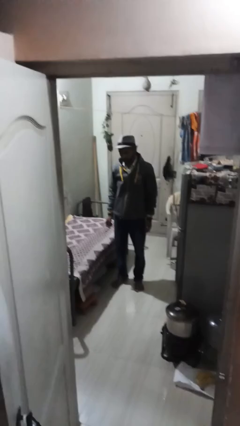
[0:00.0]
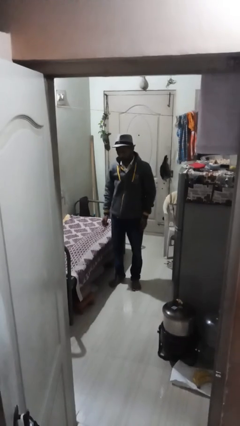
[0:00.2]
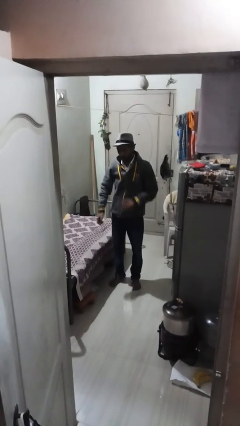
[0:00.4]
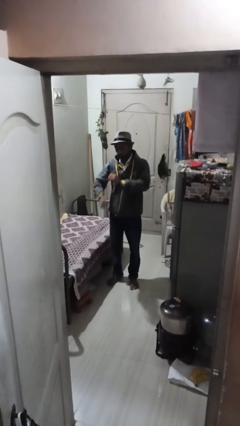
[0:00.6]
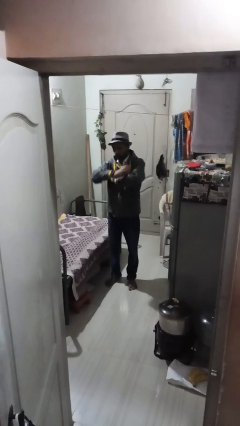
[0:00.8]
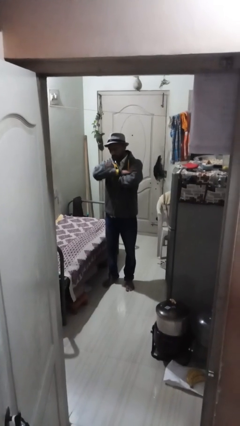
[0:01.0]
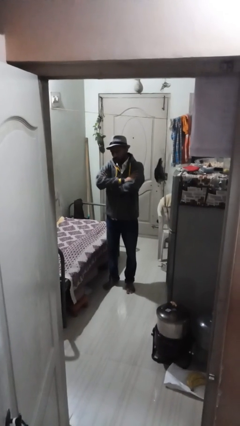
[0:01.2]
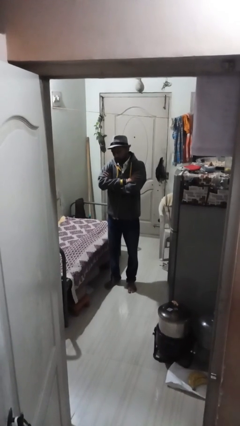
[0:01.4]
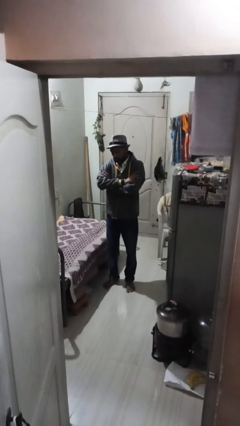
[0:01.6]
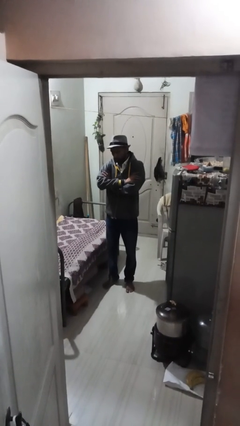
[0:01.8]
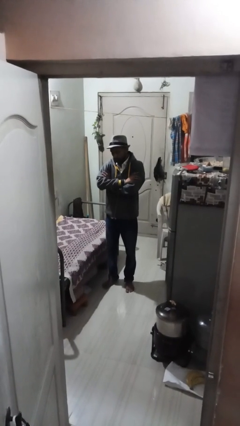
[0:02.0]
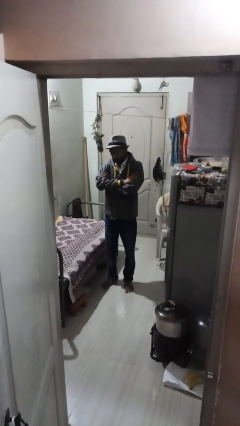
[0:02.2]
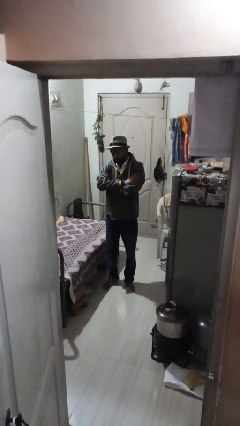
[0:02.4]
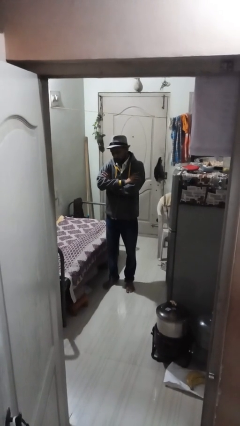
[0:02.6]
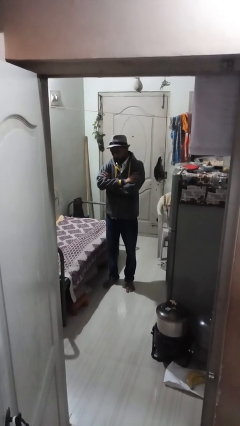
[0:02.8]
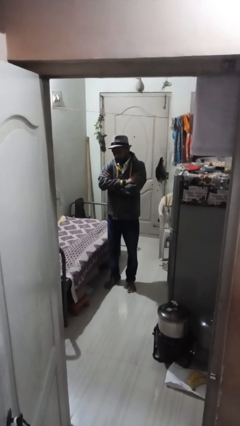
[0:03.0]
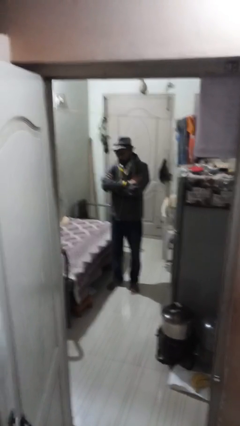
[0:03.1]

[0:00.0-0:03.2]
person crosses arms

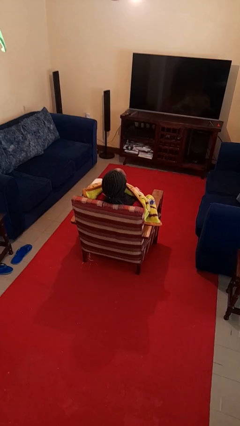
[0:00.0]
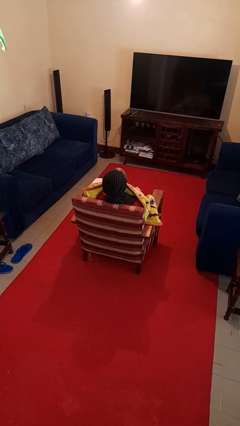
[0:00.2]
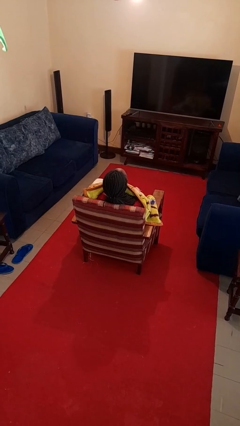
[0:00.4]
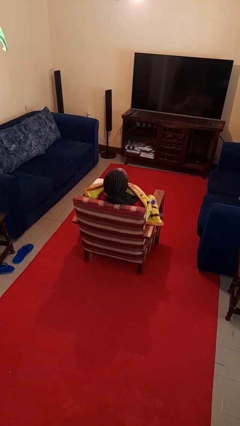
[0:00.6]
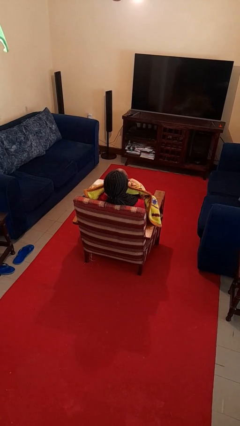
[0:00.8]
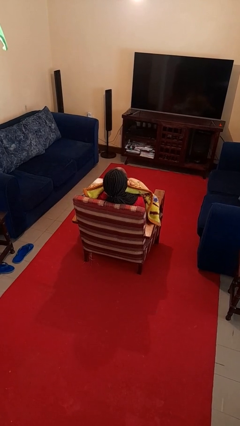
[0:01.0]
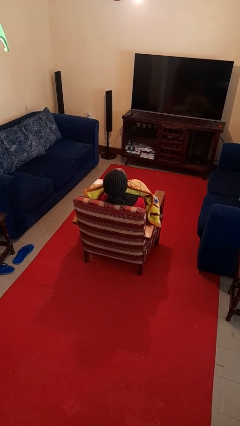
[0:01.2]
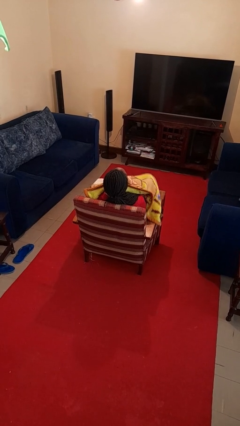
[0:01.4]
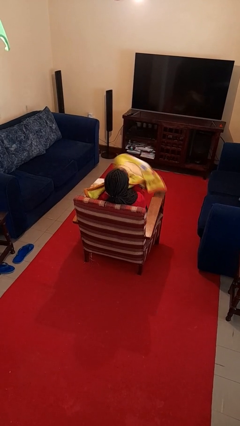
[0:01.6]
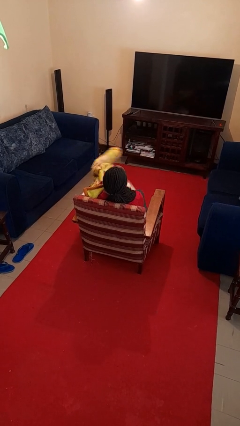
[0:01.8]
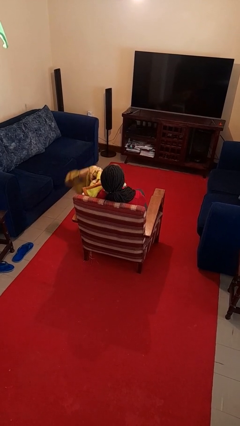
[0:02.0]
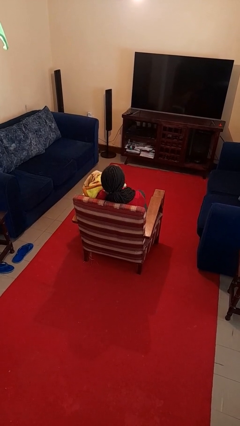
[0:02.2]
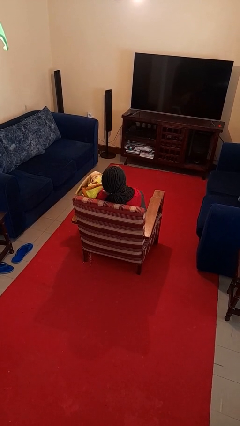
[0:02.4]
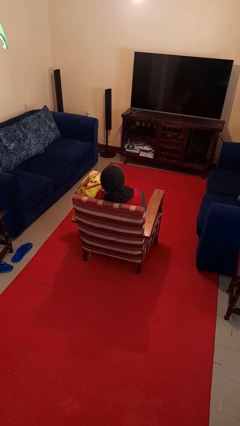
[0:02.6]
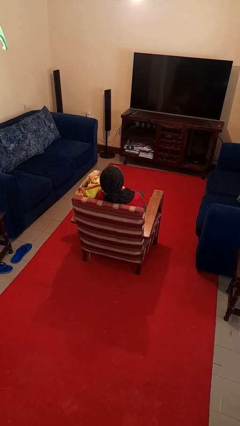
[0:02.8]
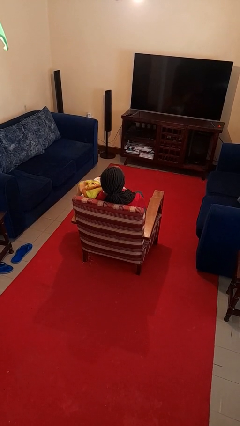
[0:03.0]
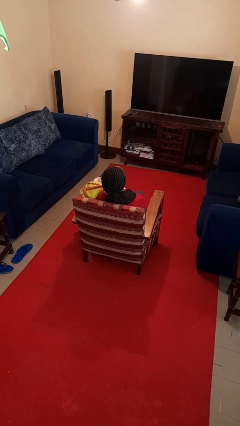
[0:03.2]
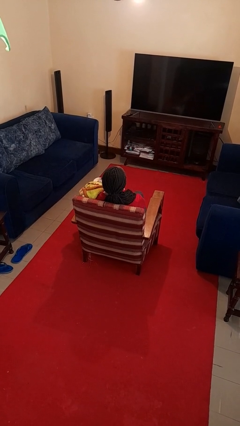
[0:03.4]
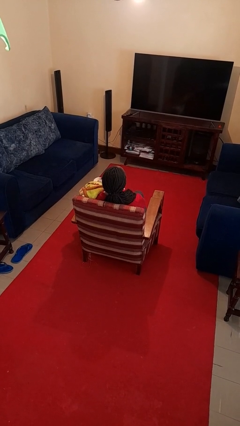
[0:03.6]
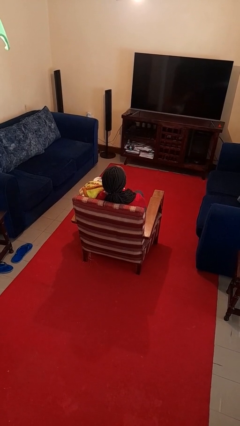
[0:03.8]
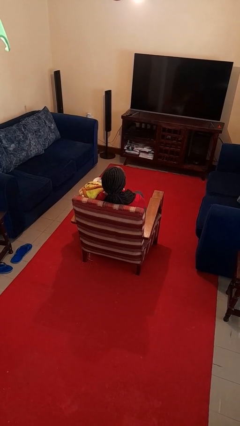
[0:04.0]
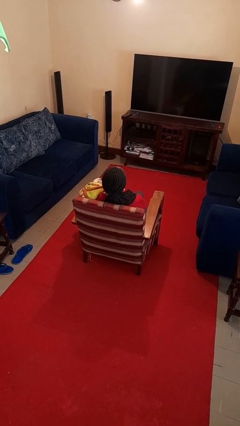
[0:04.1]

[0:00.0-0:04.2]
person uncovers with blanket

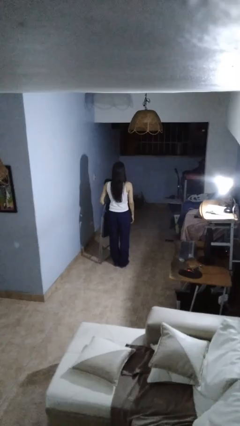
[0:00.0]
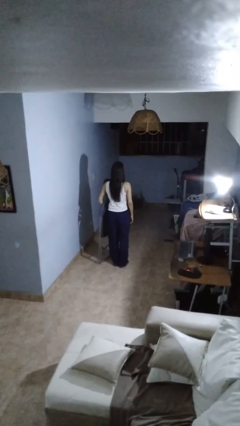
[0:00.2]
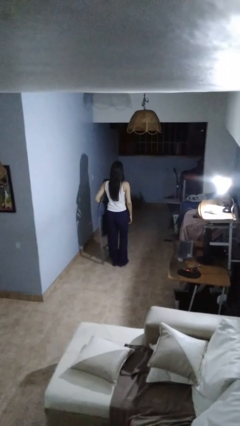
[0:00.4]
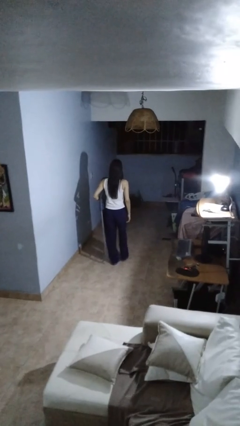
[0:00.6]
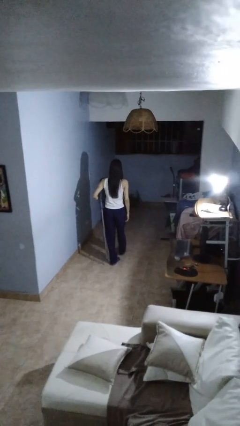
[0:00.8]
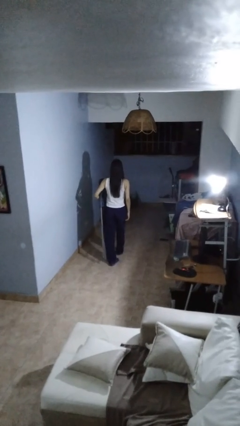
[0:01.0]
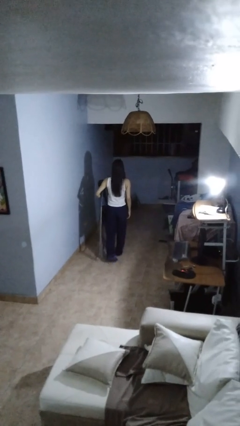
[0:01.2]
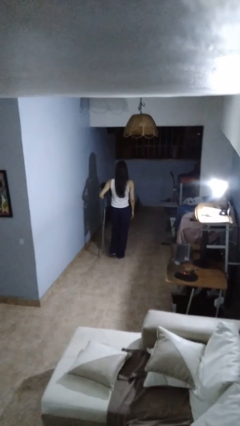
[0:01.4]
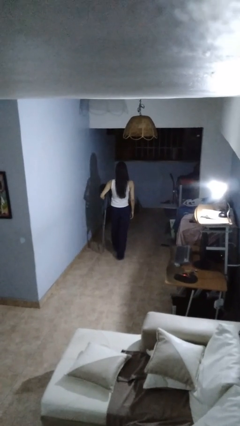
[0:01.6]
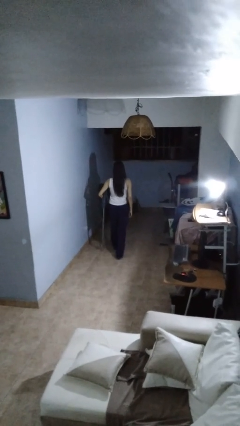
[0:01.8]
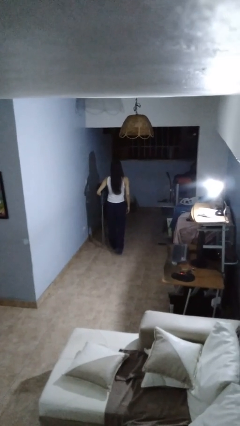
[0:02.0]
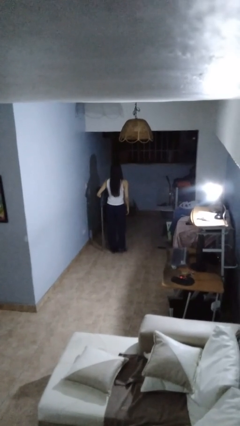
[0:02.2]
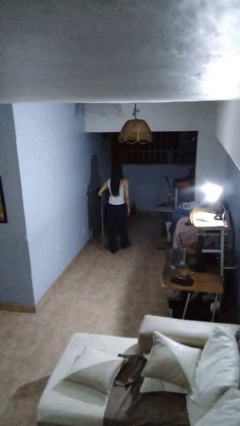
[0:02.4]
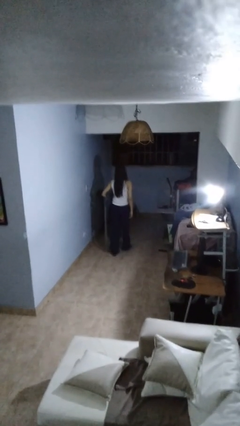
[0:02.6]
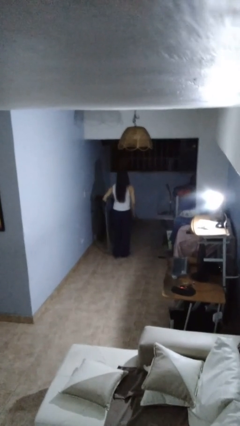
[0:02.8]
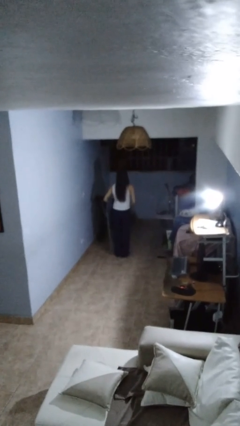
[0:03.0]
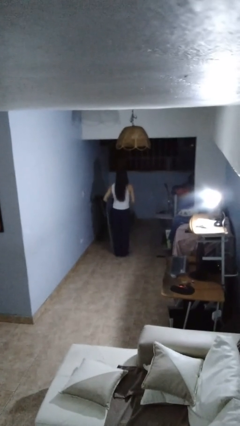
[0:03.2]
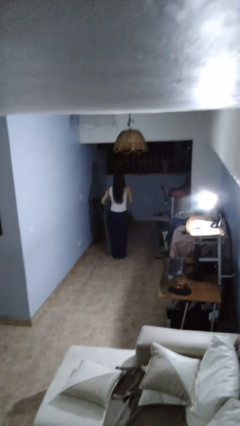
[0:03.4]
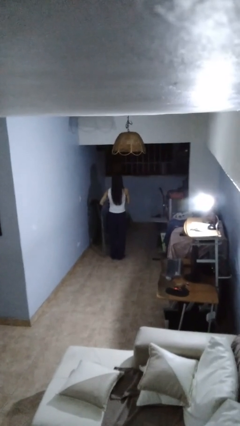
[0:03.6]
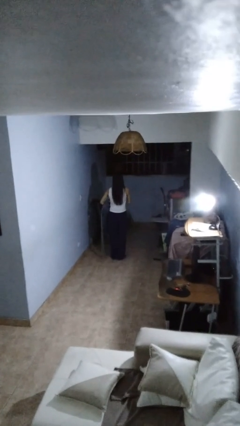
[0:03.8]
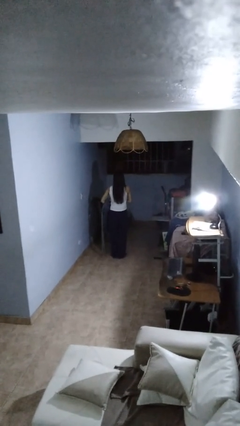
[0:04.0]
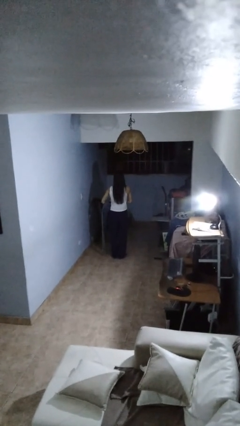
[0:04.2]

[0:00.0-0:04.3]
person carries furniture

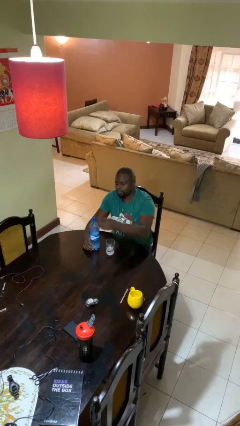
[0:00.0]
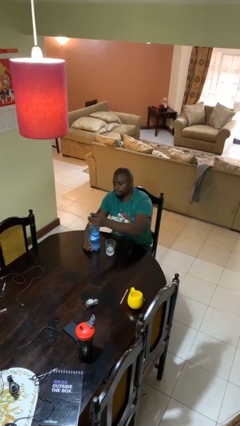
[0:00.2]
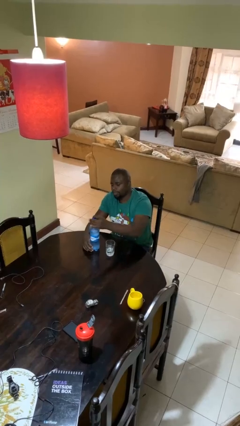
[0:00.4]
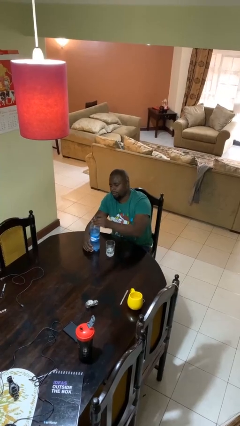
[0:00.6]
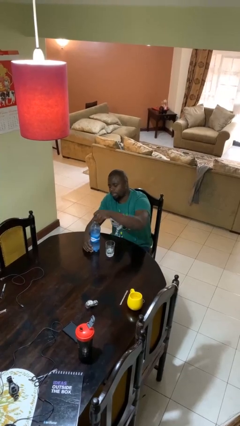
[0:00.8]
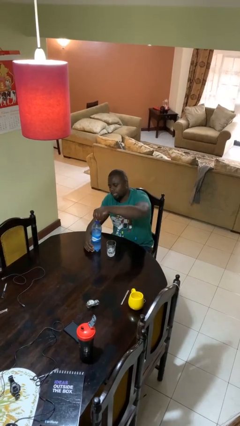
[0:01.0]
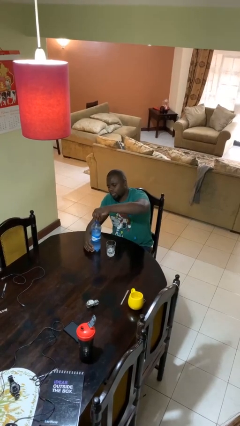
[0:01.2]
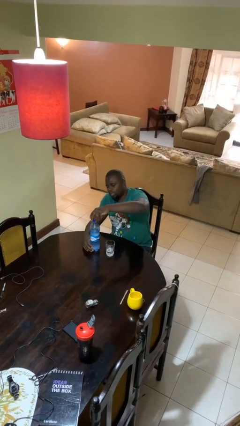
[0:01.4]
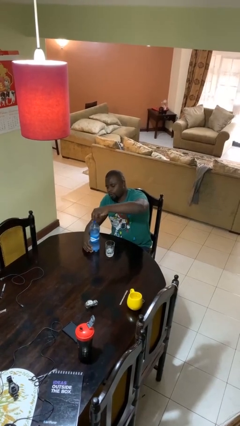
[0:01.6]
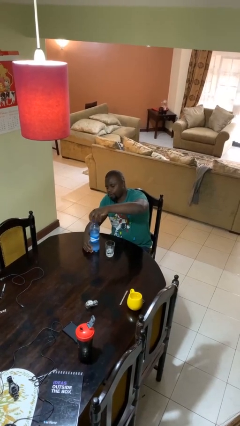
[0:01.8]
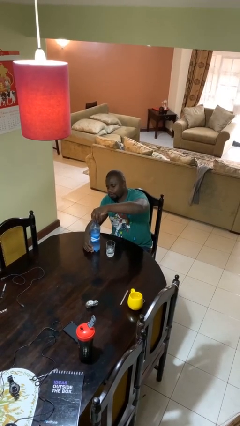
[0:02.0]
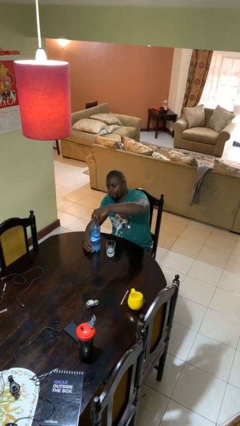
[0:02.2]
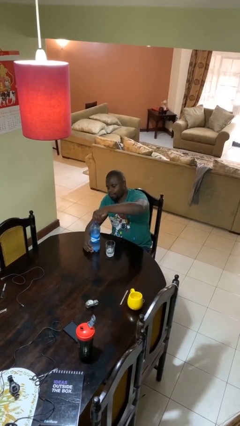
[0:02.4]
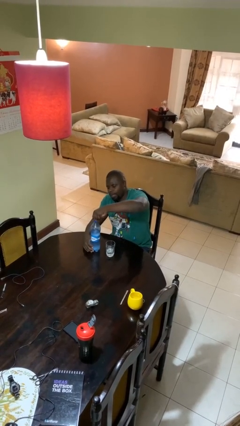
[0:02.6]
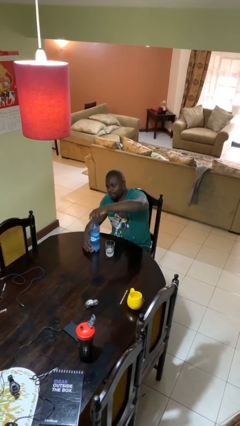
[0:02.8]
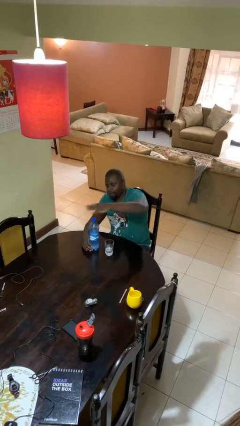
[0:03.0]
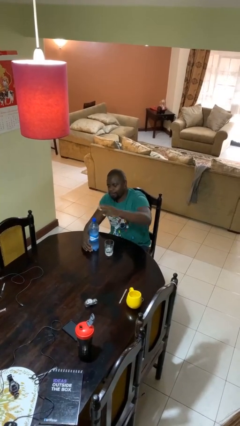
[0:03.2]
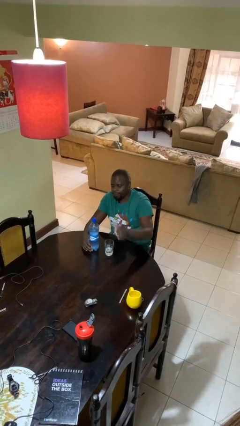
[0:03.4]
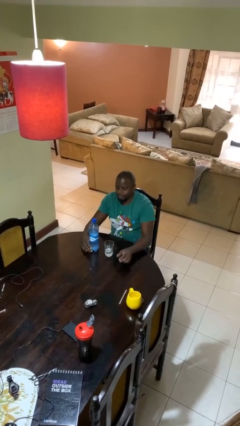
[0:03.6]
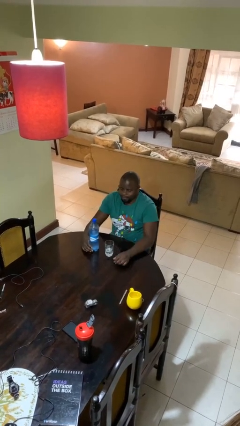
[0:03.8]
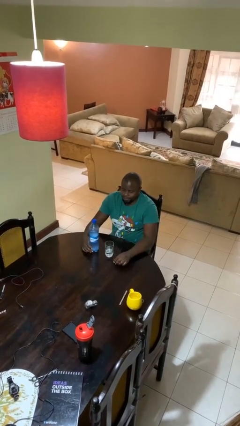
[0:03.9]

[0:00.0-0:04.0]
person screws lid to bottle

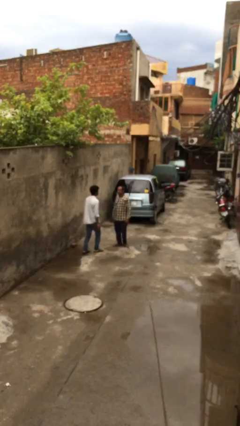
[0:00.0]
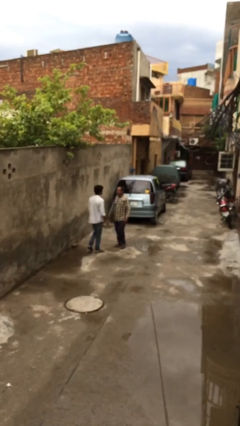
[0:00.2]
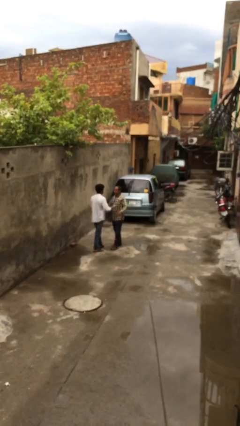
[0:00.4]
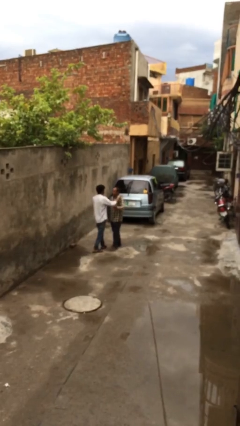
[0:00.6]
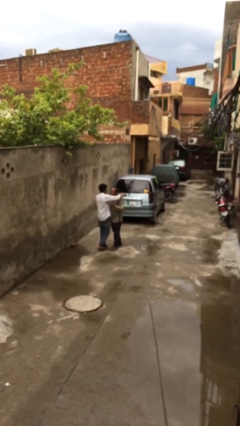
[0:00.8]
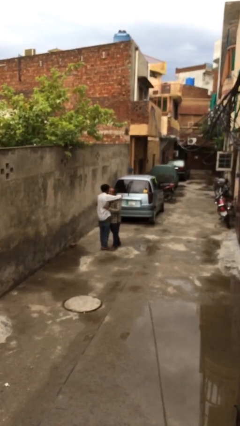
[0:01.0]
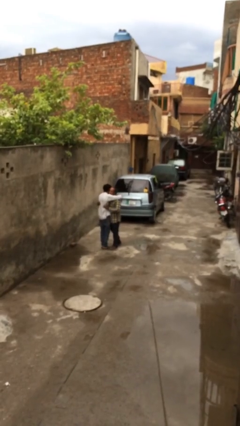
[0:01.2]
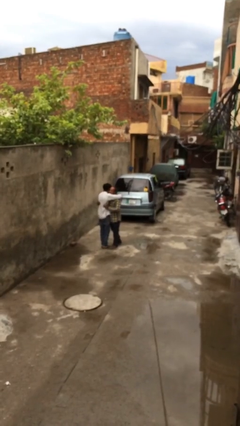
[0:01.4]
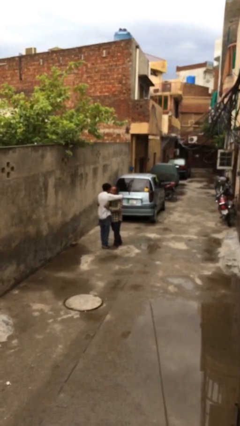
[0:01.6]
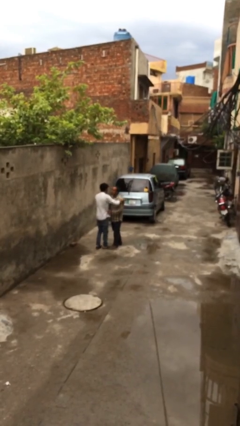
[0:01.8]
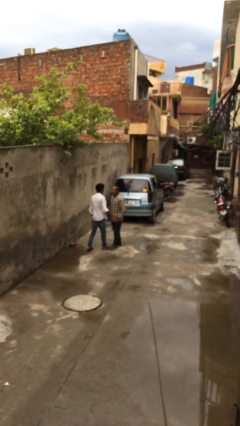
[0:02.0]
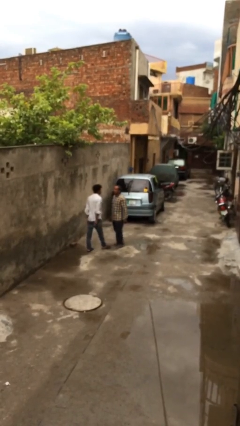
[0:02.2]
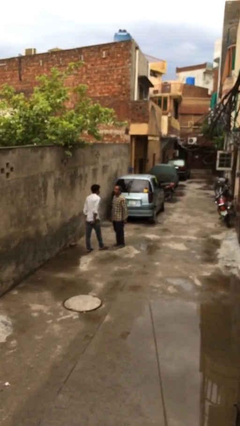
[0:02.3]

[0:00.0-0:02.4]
person embraces person
